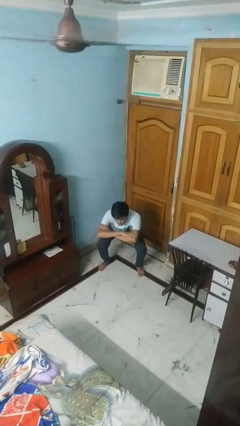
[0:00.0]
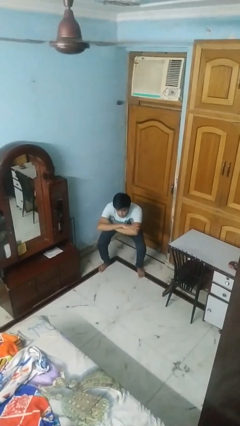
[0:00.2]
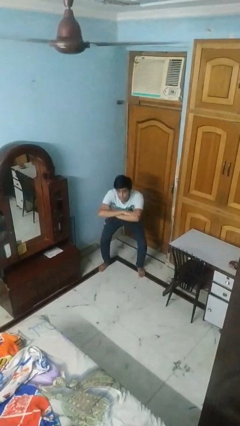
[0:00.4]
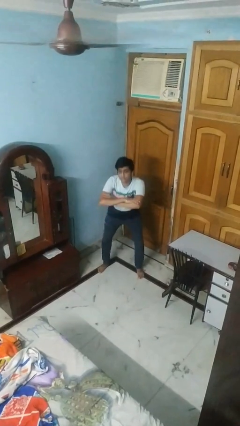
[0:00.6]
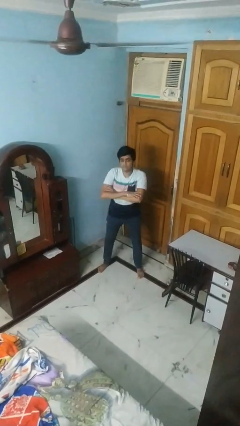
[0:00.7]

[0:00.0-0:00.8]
person stands up

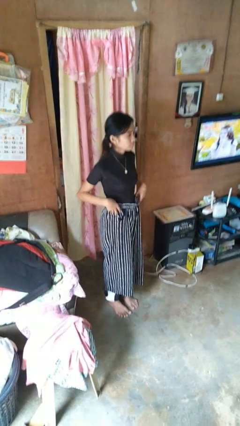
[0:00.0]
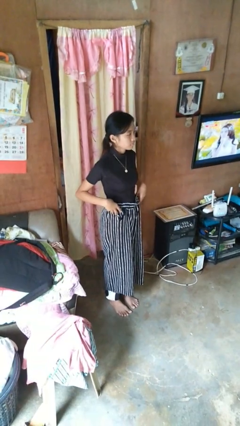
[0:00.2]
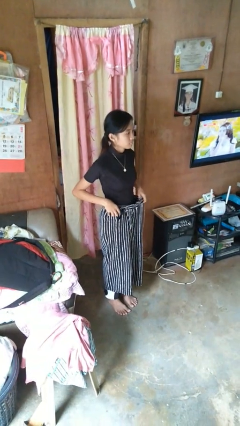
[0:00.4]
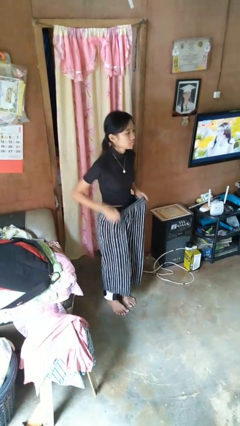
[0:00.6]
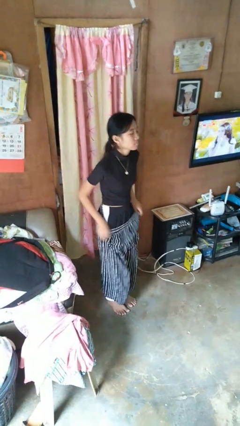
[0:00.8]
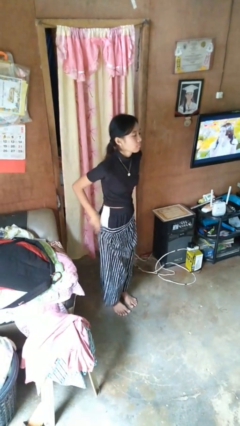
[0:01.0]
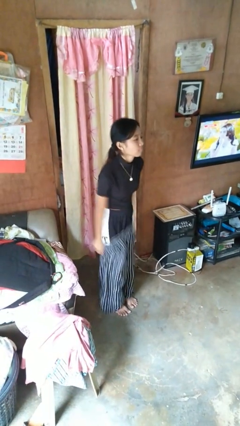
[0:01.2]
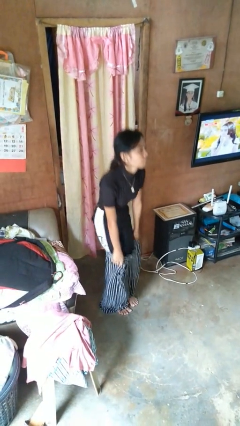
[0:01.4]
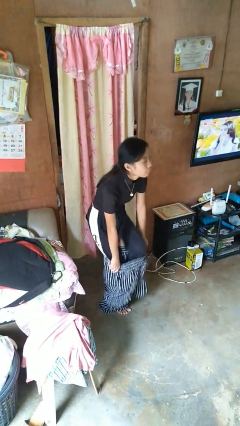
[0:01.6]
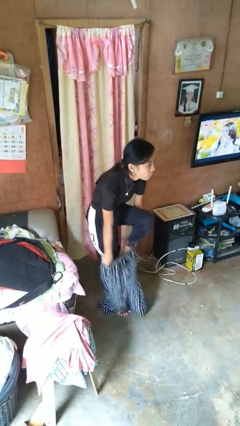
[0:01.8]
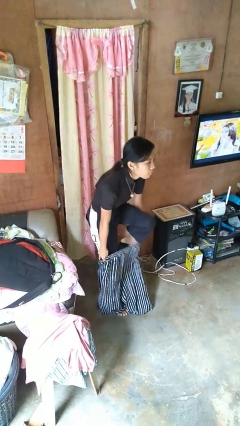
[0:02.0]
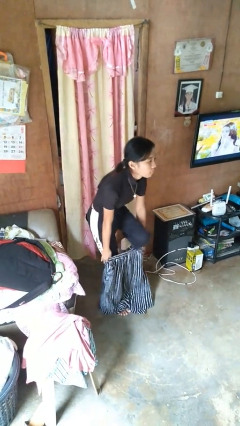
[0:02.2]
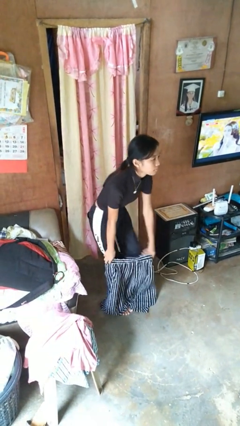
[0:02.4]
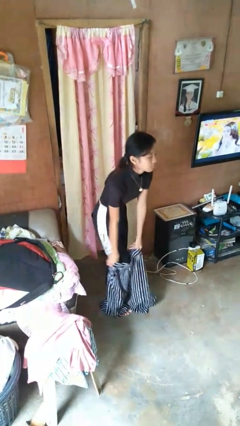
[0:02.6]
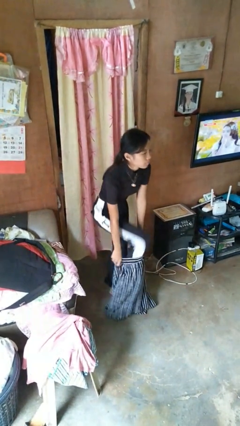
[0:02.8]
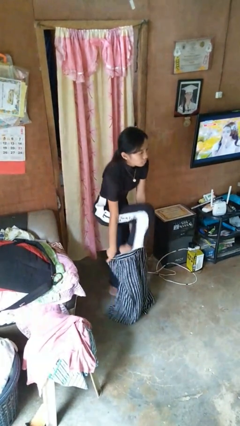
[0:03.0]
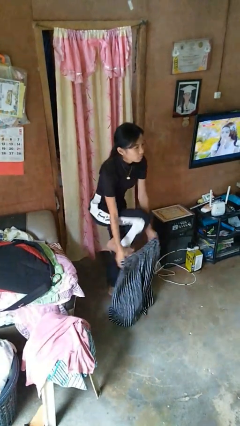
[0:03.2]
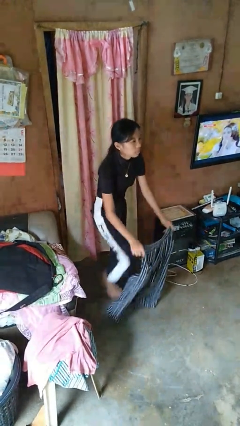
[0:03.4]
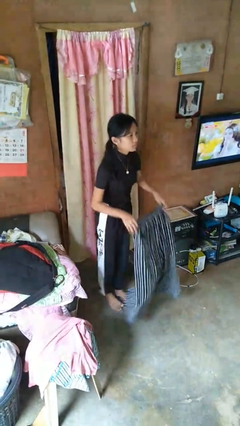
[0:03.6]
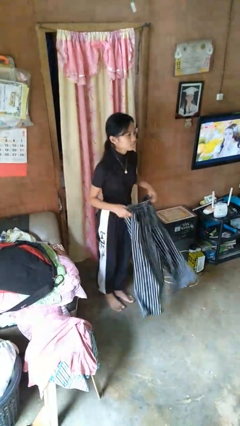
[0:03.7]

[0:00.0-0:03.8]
person takes off pants

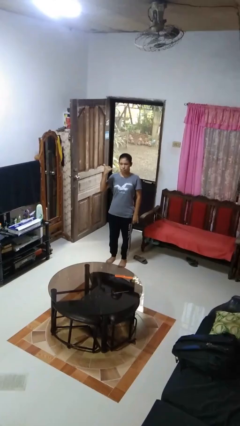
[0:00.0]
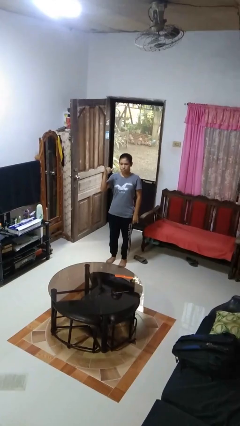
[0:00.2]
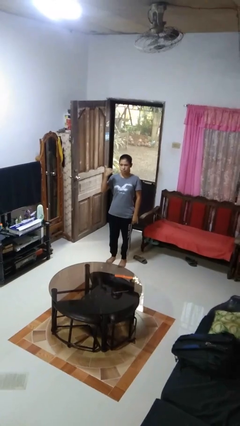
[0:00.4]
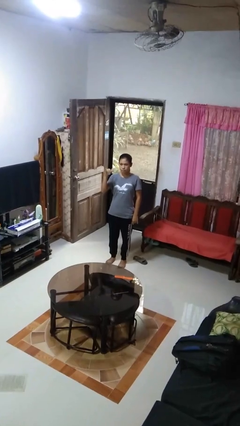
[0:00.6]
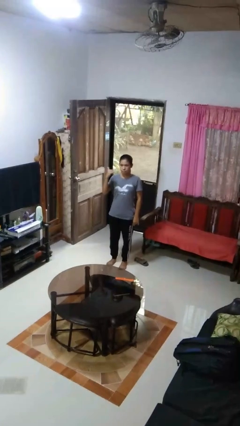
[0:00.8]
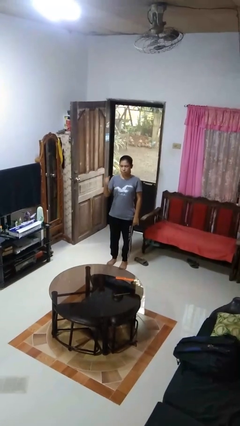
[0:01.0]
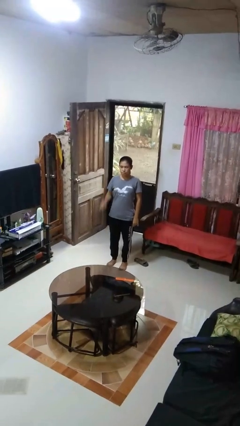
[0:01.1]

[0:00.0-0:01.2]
person gestures hang loose

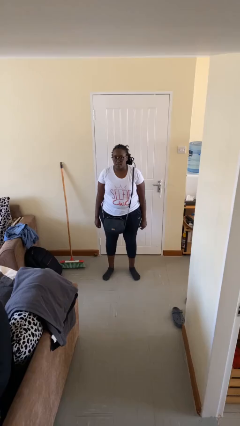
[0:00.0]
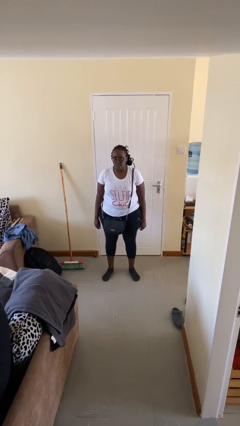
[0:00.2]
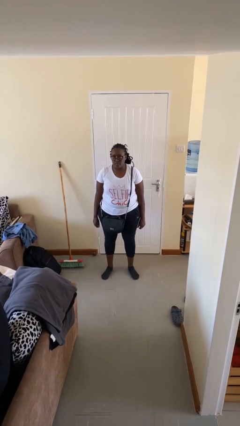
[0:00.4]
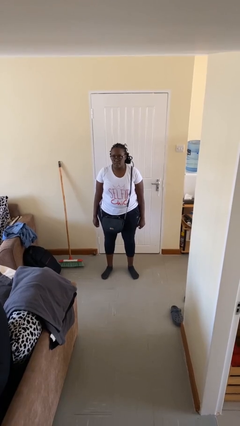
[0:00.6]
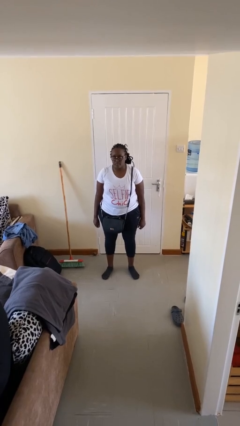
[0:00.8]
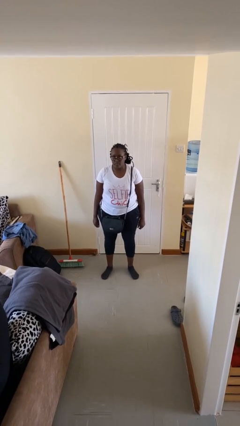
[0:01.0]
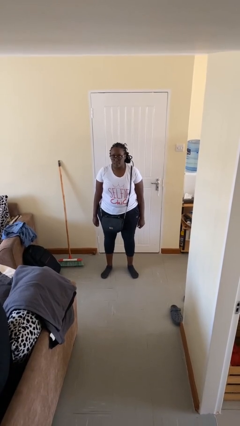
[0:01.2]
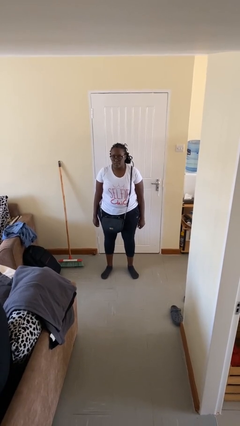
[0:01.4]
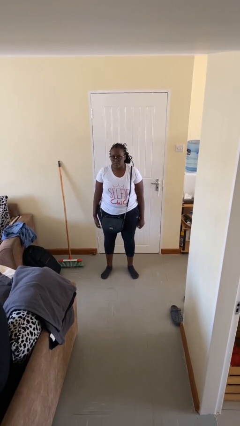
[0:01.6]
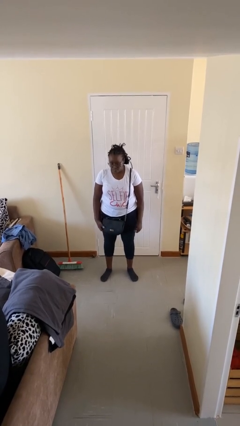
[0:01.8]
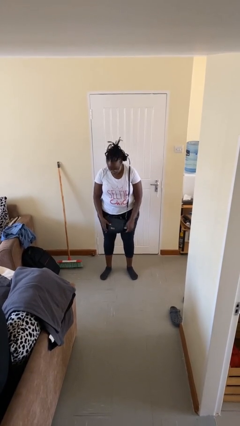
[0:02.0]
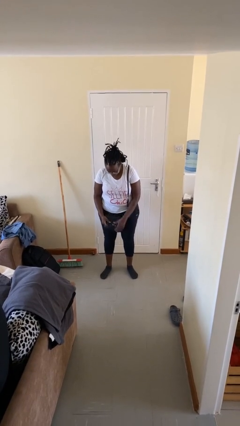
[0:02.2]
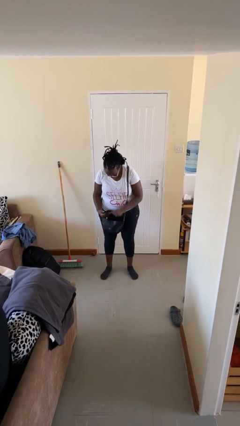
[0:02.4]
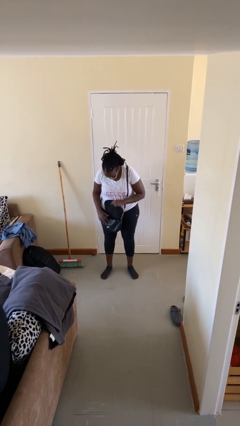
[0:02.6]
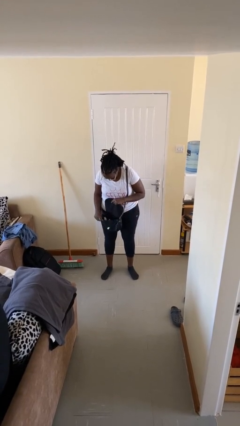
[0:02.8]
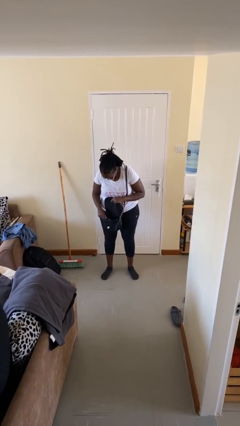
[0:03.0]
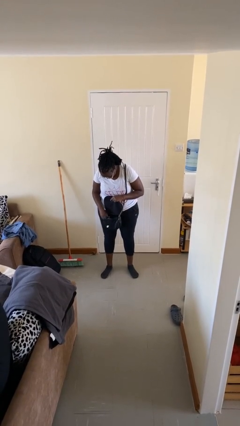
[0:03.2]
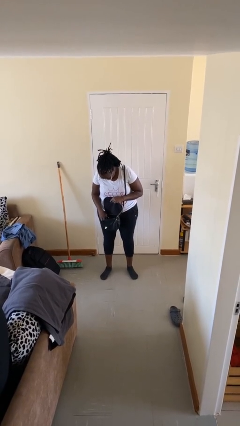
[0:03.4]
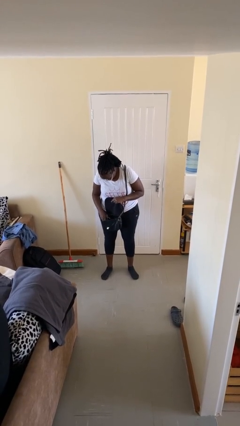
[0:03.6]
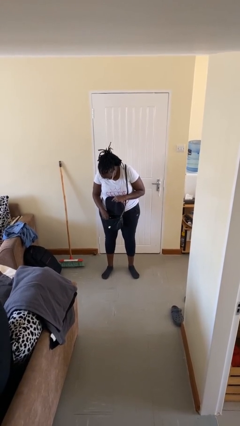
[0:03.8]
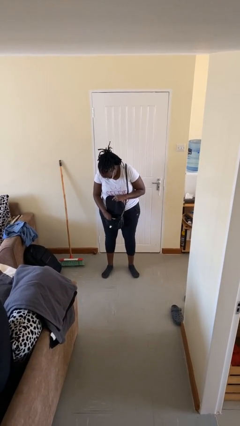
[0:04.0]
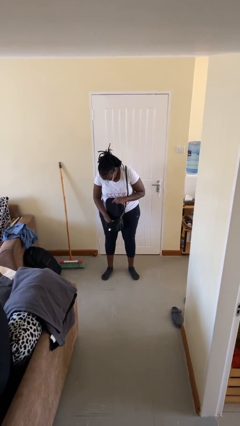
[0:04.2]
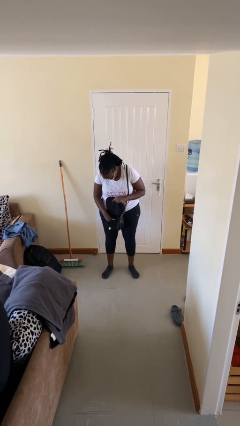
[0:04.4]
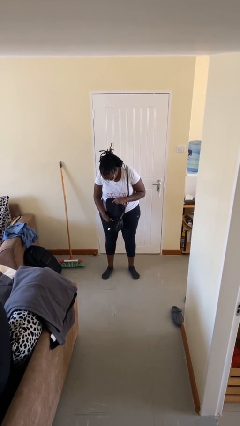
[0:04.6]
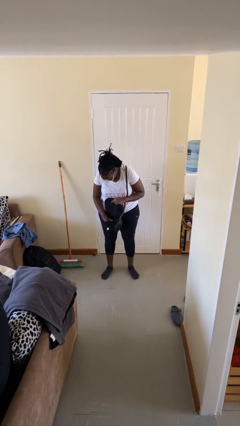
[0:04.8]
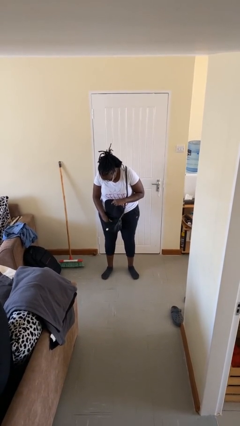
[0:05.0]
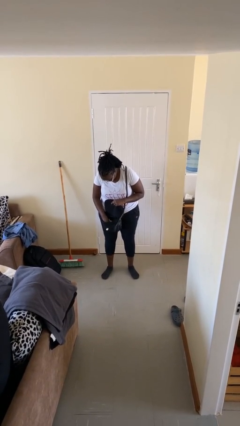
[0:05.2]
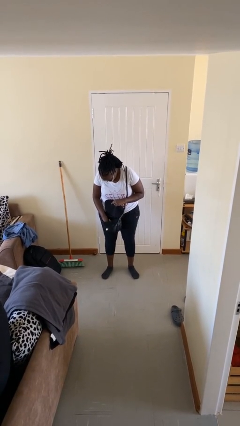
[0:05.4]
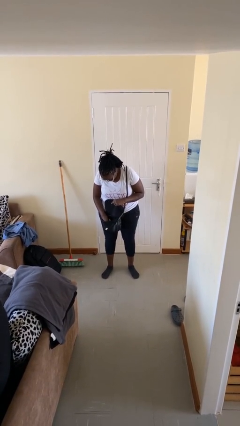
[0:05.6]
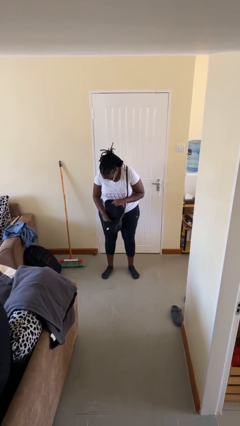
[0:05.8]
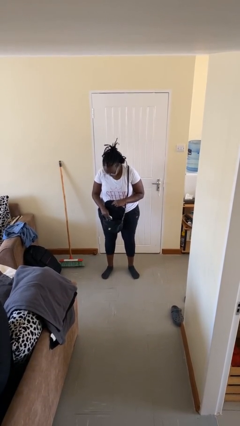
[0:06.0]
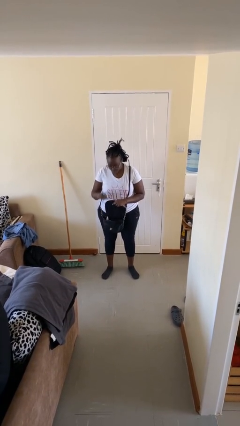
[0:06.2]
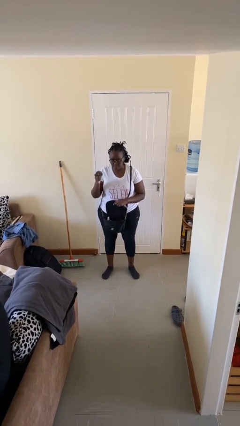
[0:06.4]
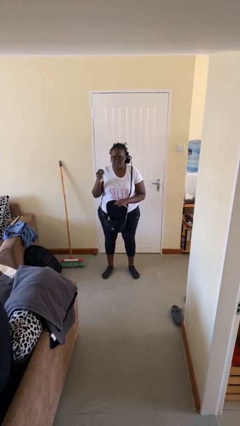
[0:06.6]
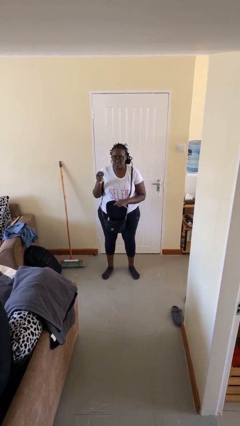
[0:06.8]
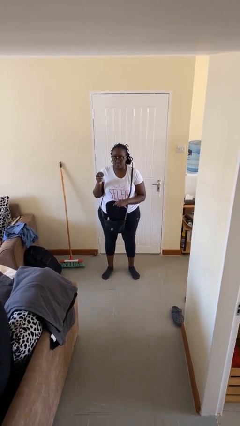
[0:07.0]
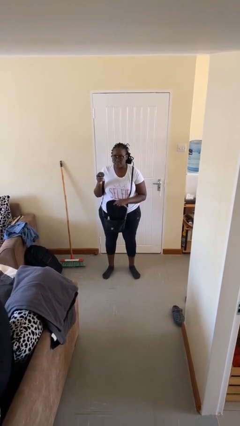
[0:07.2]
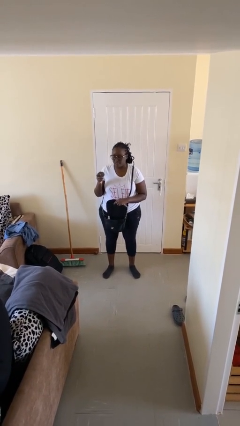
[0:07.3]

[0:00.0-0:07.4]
person searches in purse

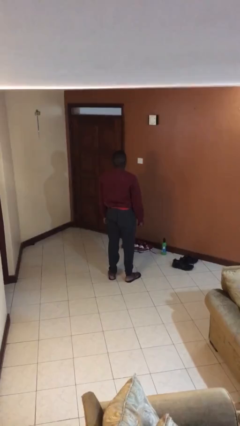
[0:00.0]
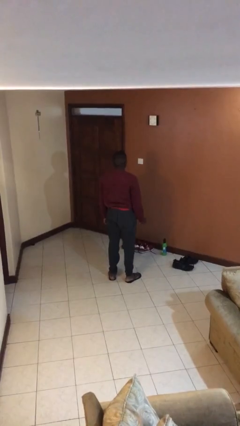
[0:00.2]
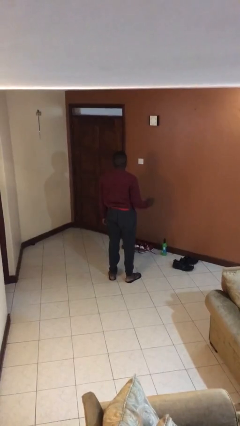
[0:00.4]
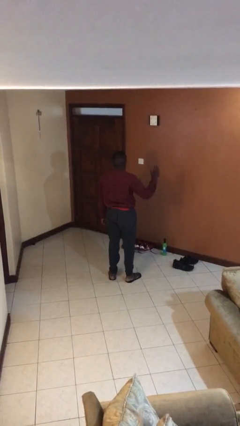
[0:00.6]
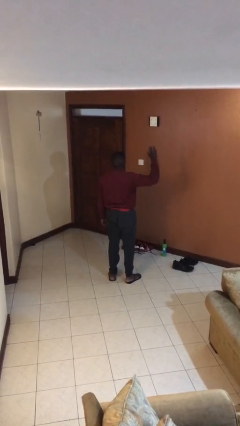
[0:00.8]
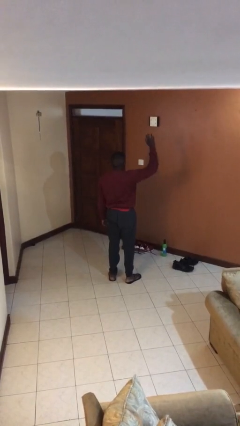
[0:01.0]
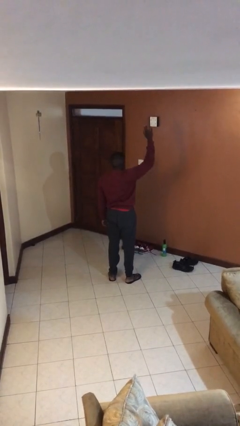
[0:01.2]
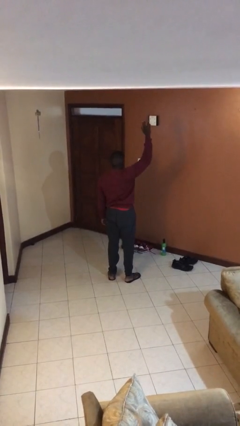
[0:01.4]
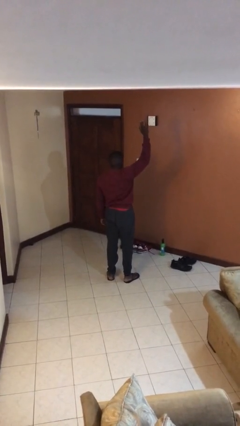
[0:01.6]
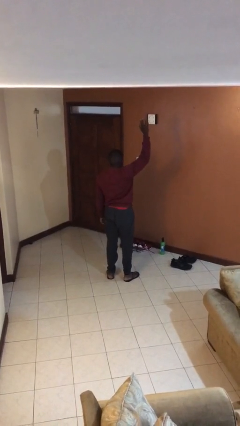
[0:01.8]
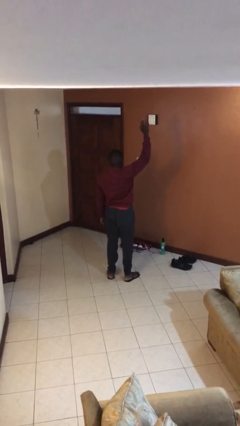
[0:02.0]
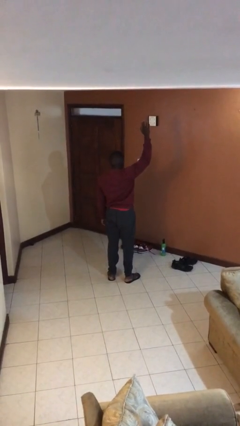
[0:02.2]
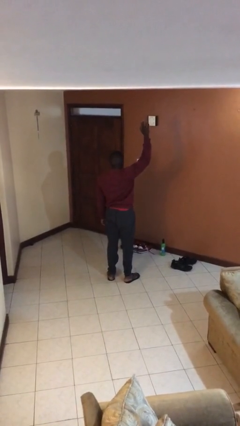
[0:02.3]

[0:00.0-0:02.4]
person gestures raise hand

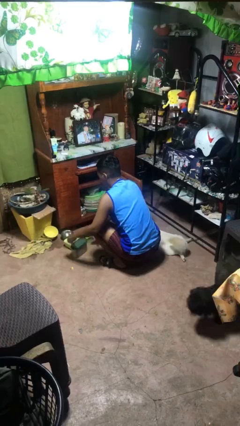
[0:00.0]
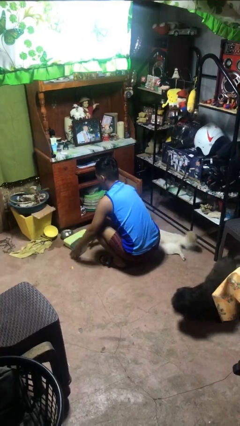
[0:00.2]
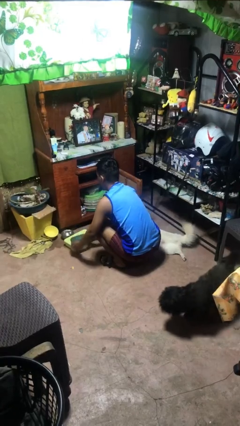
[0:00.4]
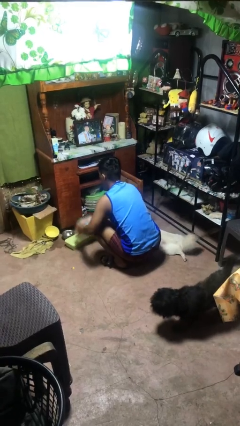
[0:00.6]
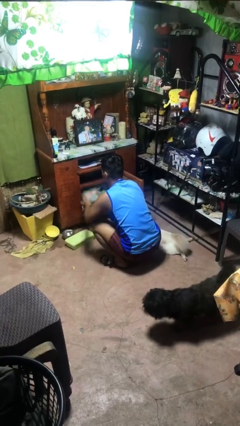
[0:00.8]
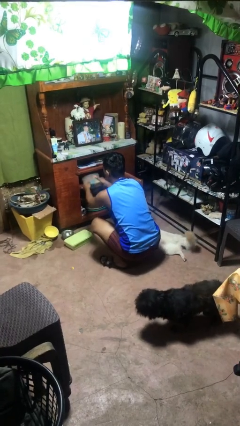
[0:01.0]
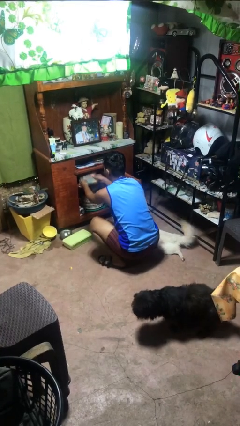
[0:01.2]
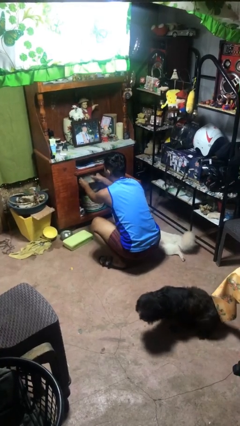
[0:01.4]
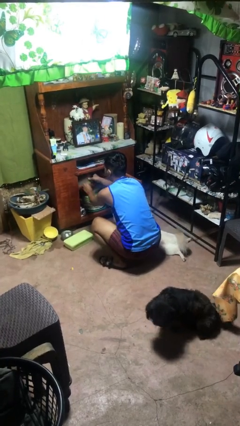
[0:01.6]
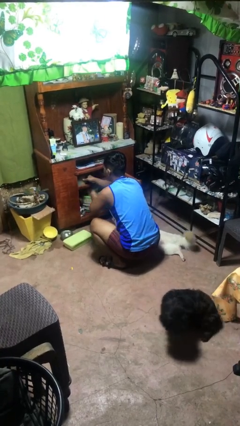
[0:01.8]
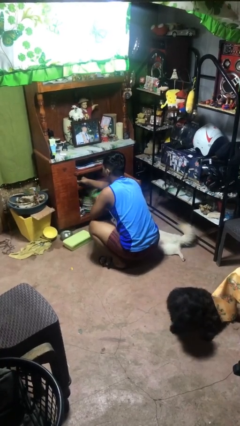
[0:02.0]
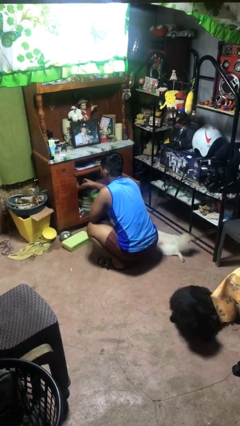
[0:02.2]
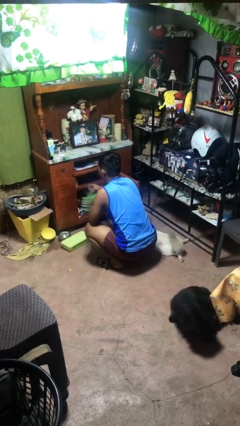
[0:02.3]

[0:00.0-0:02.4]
person puts object in cabinet
